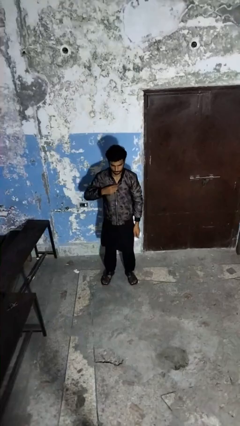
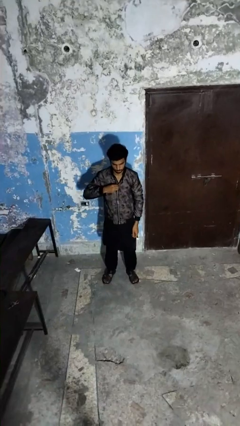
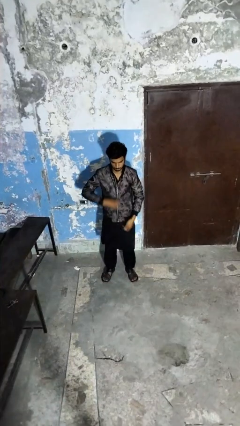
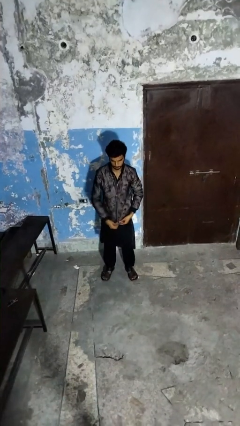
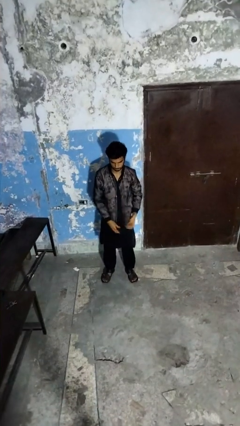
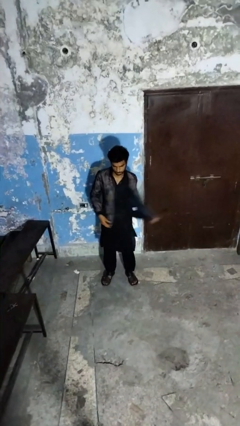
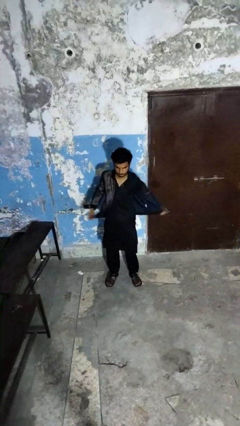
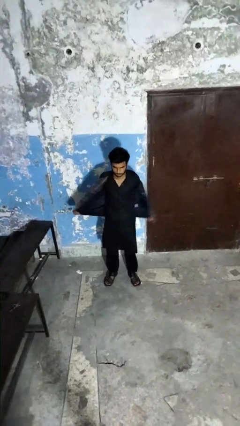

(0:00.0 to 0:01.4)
person unzips jacket

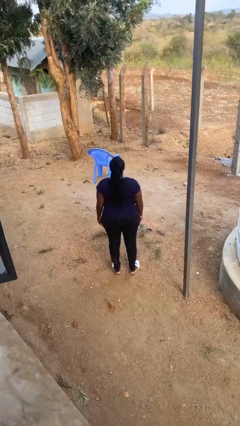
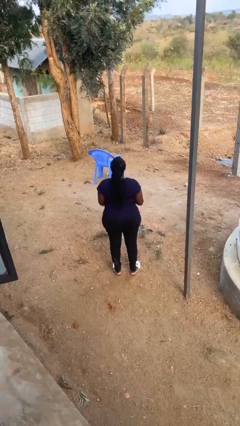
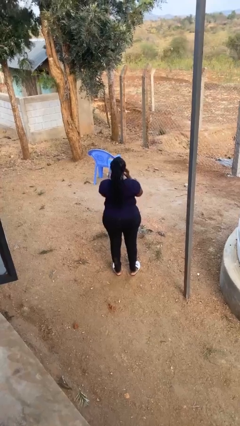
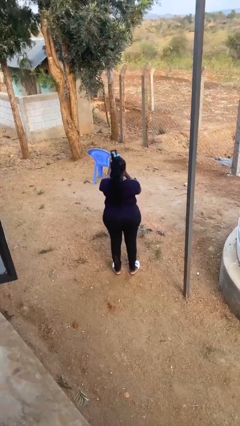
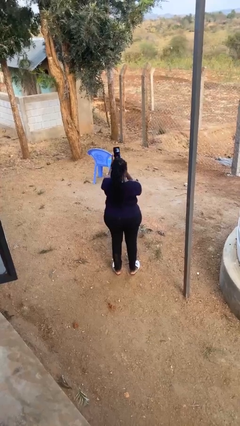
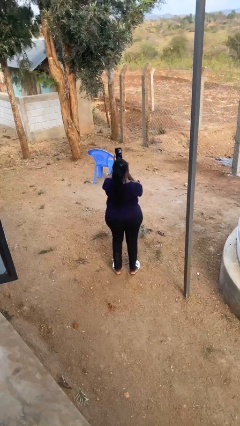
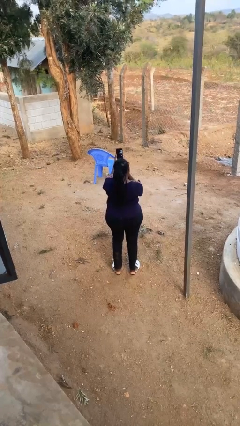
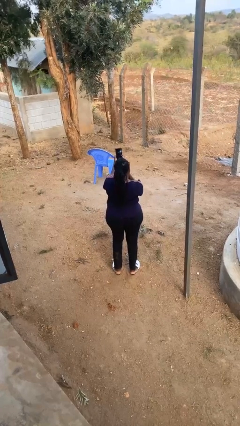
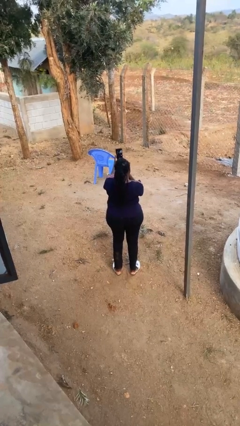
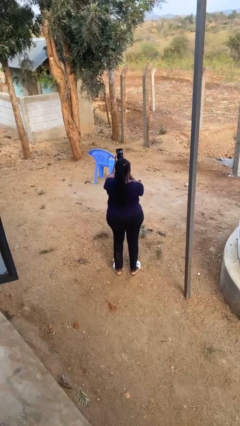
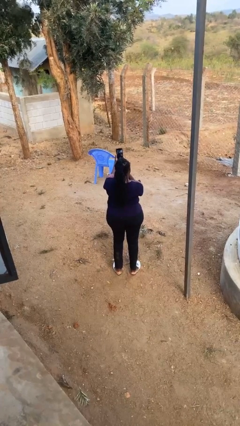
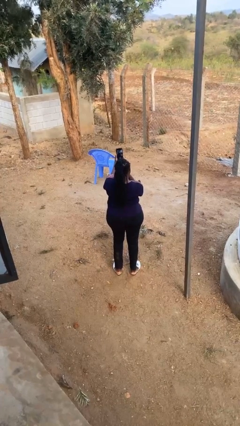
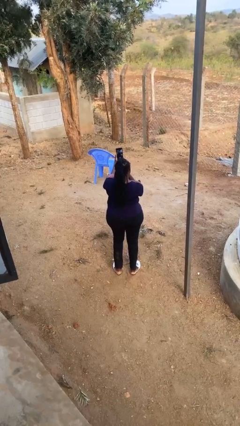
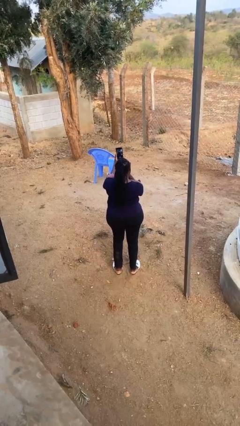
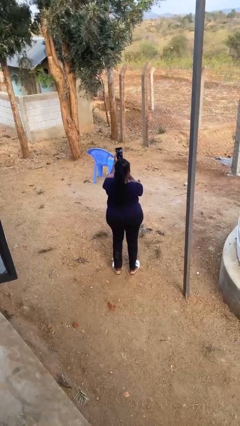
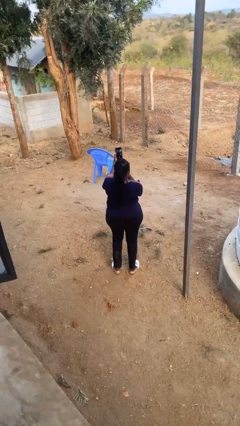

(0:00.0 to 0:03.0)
person takes selfie

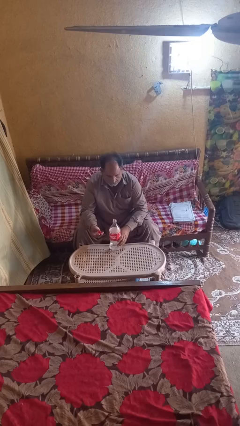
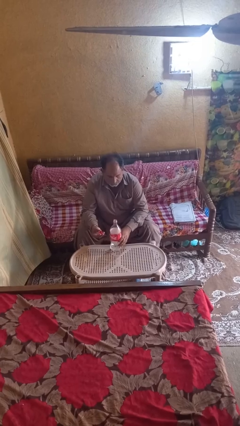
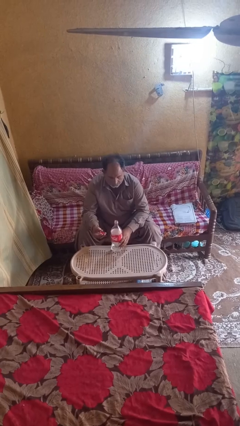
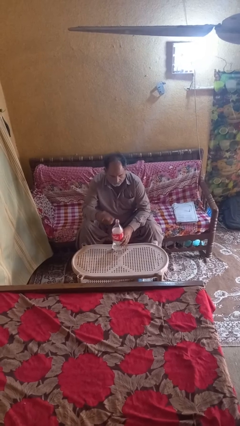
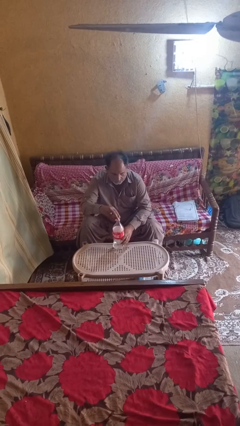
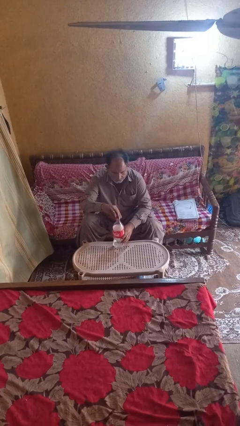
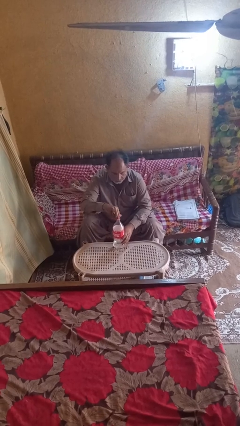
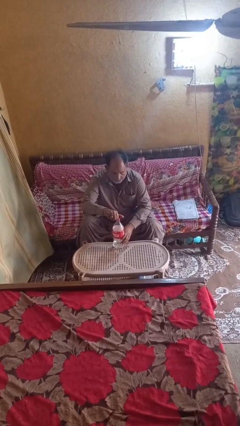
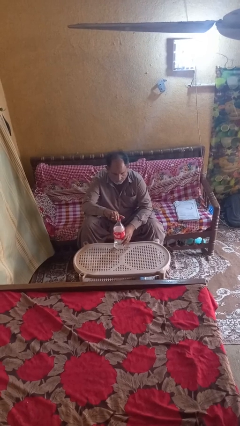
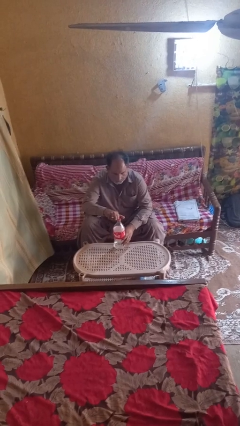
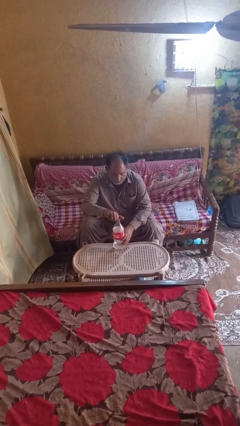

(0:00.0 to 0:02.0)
person screws lid to bottle

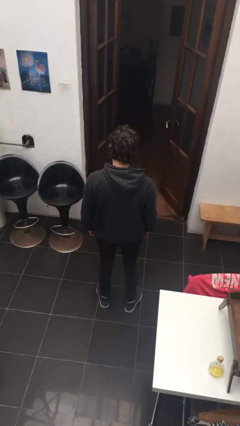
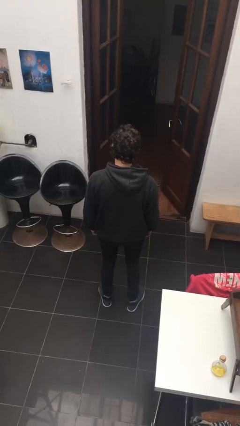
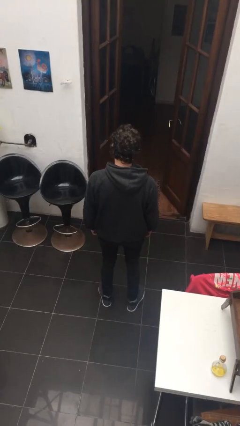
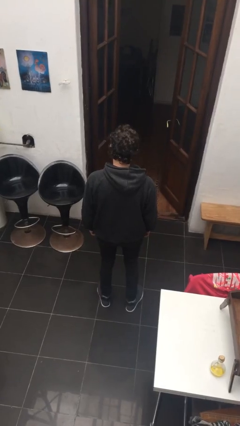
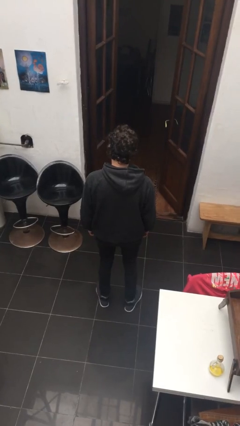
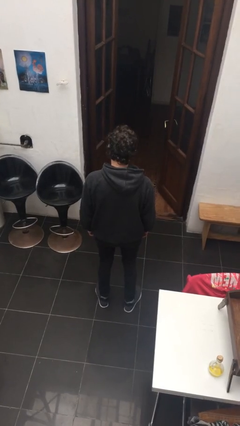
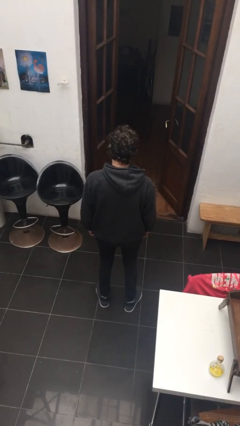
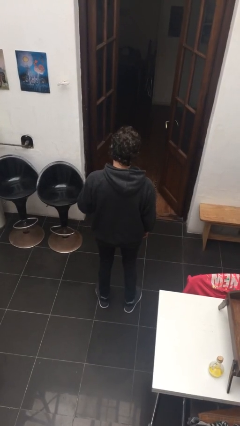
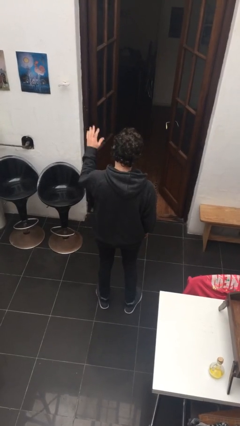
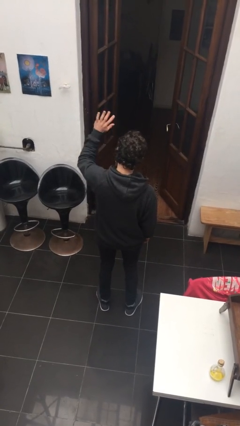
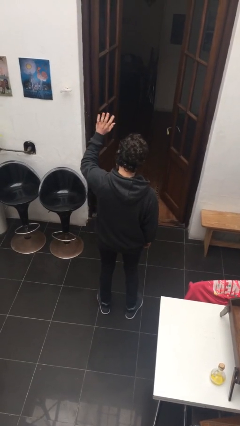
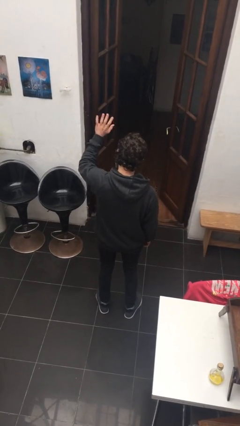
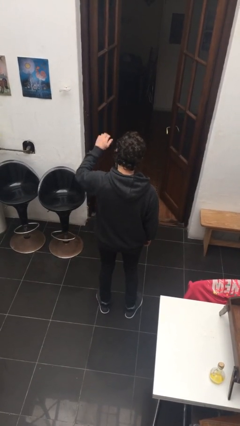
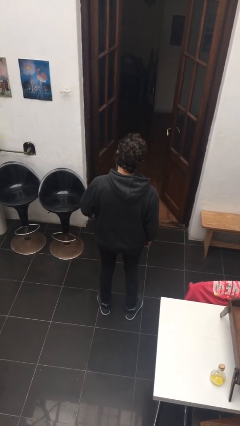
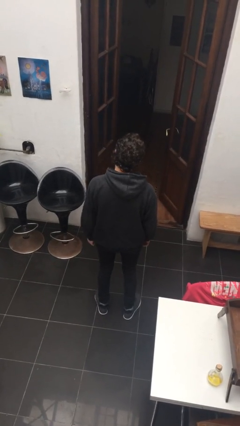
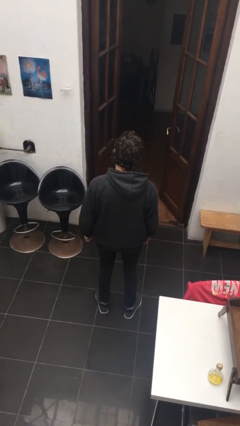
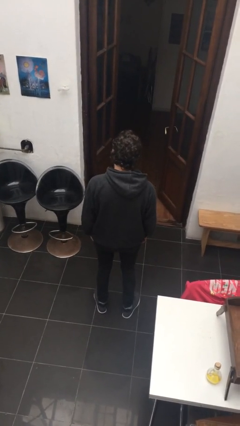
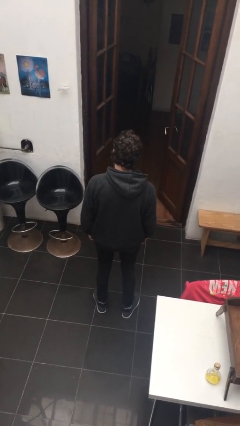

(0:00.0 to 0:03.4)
person waves at person

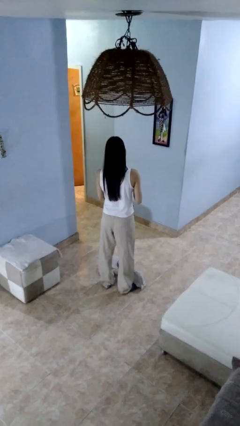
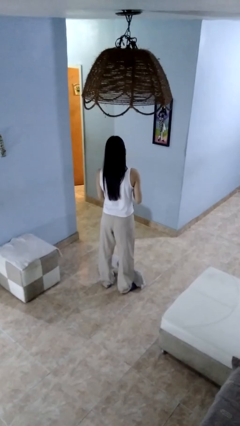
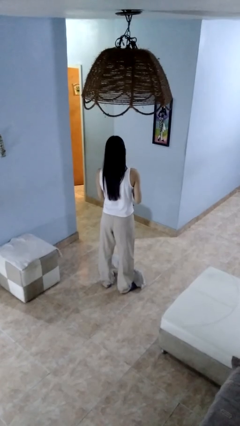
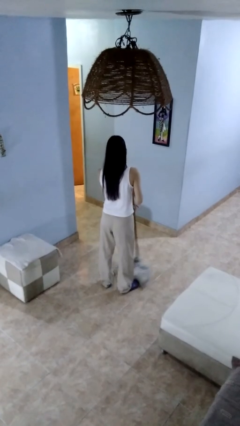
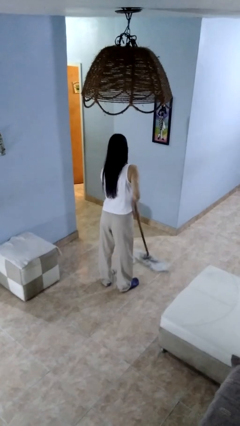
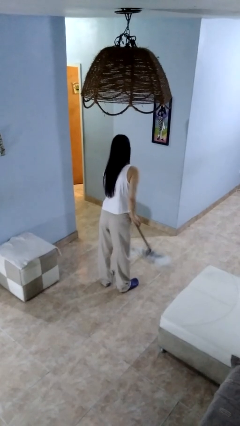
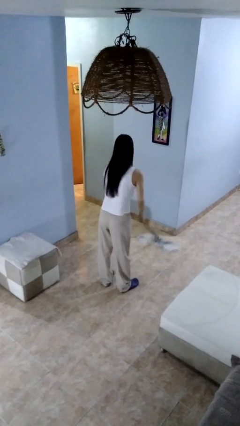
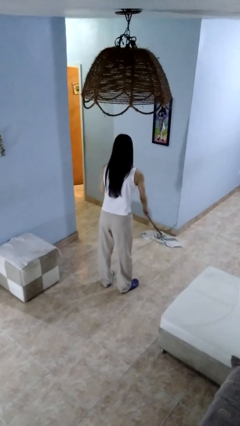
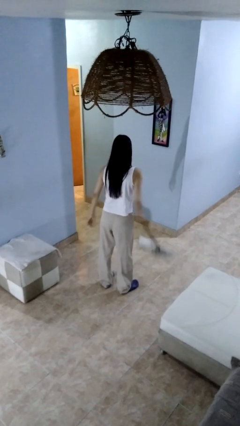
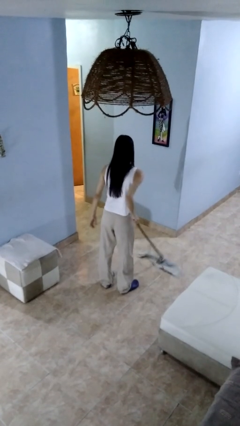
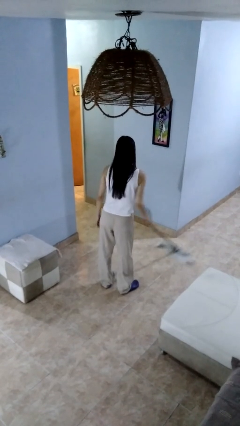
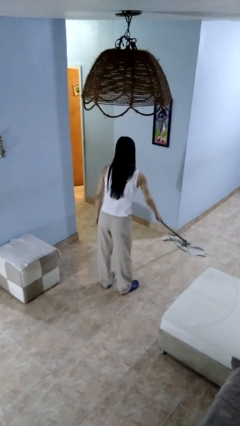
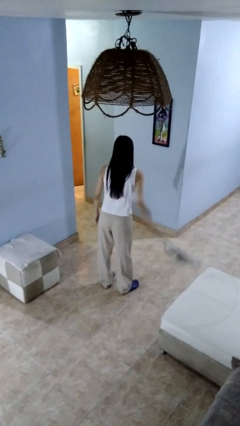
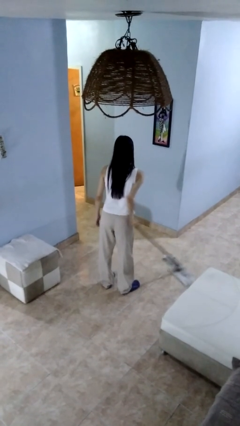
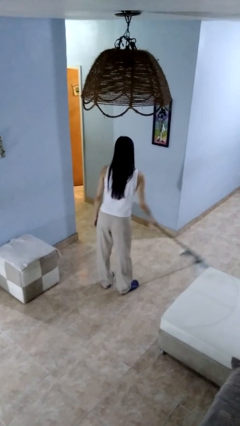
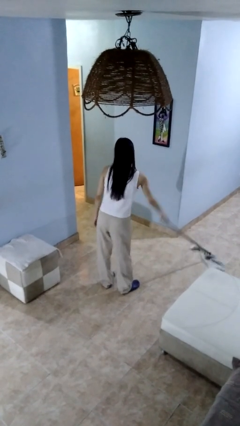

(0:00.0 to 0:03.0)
person mops

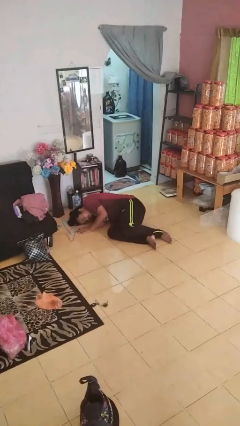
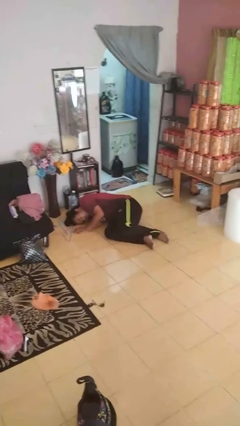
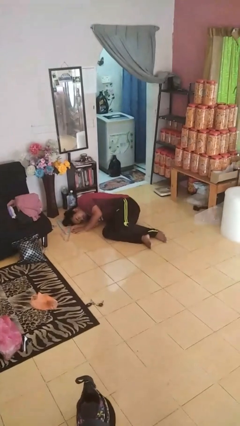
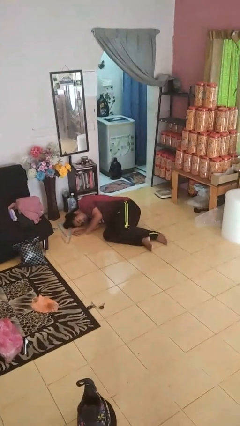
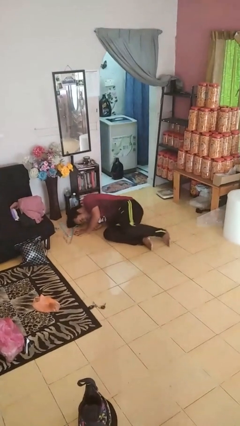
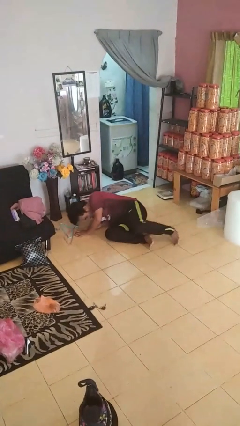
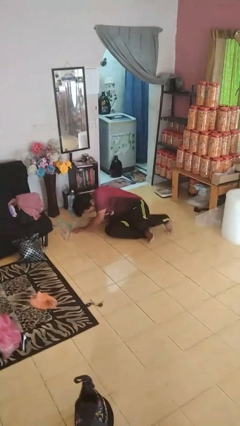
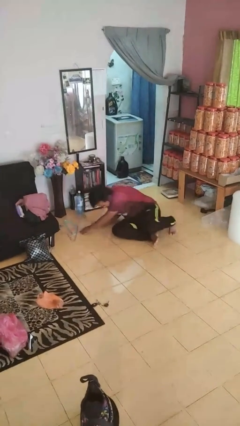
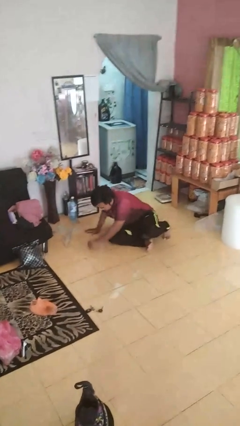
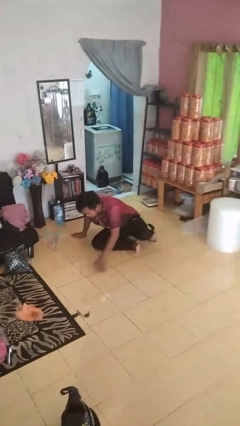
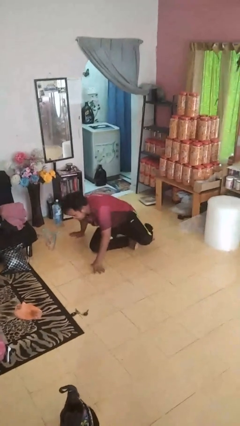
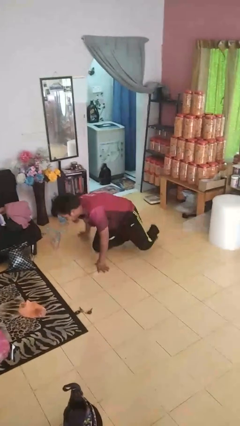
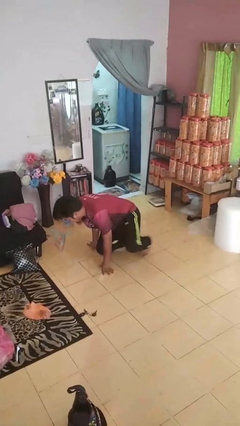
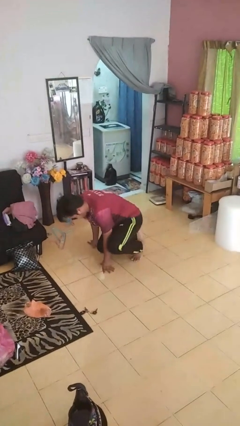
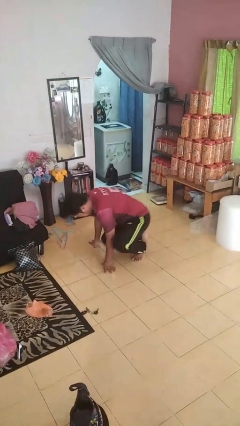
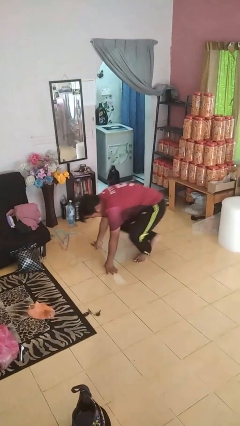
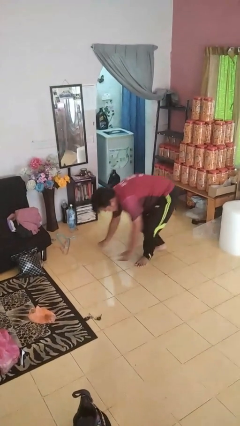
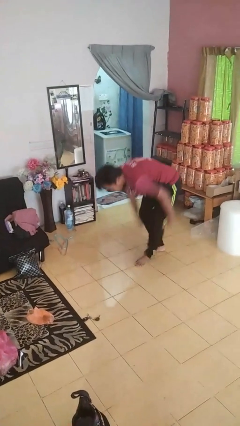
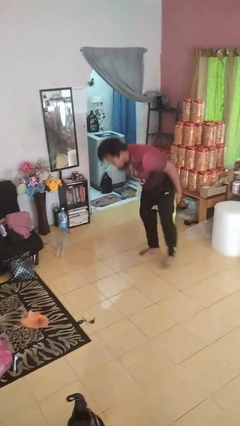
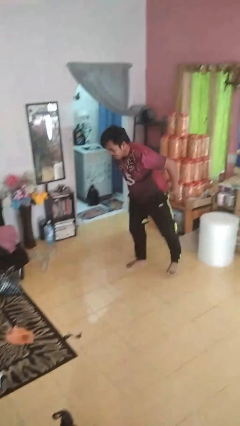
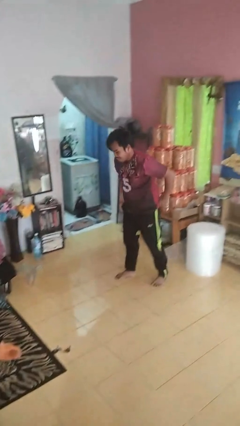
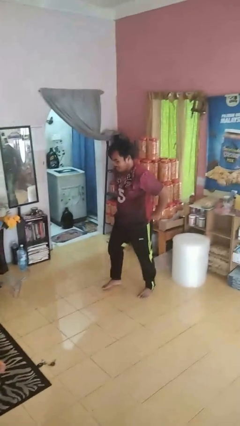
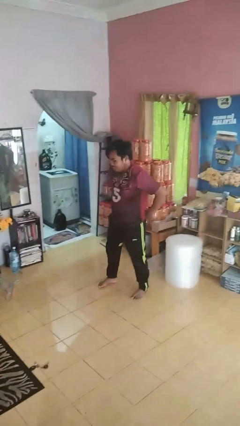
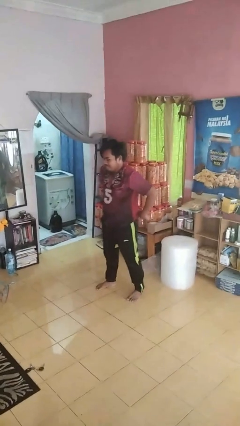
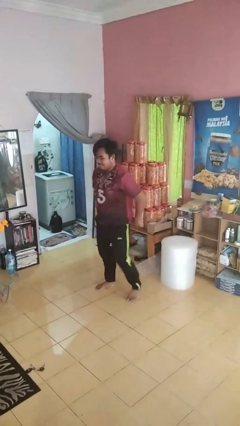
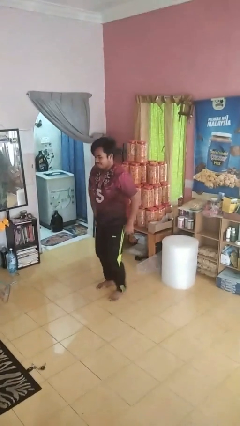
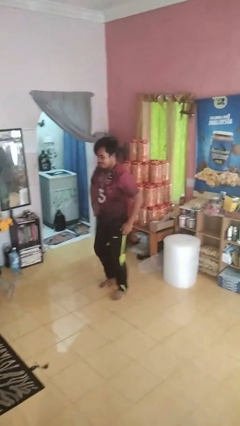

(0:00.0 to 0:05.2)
person stands up from floor
